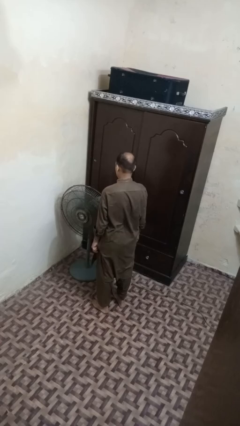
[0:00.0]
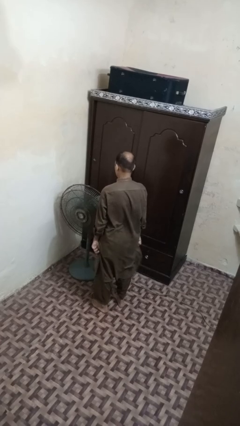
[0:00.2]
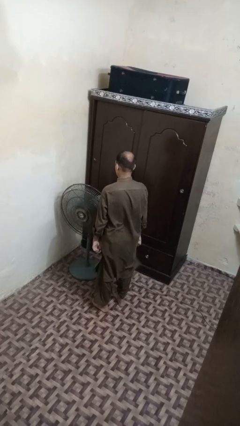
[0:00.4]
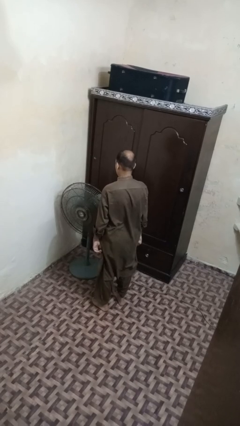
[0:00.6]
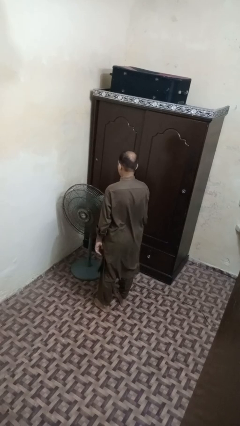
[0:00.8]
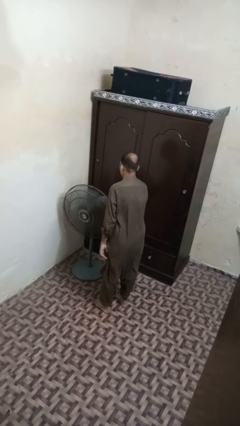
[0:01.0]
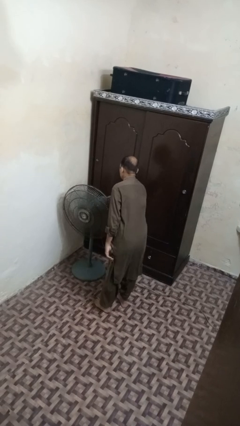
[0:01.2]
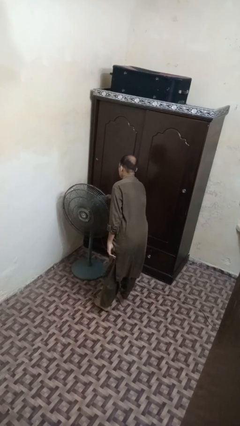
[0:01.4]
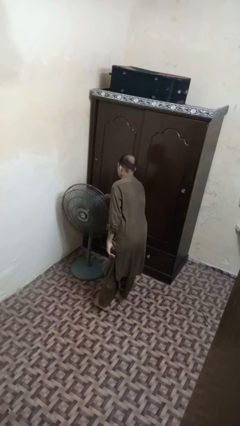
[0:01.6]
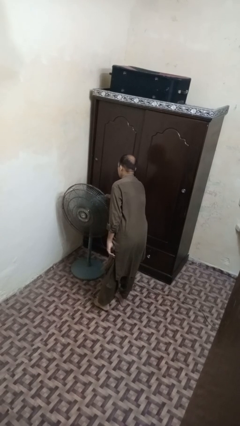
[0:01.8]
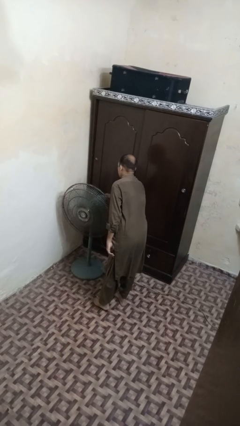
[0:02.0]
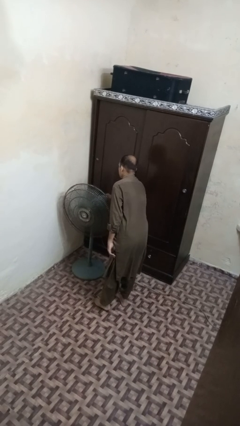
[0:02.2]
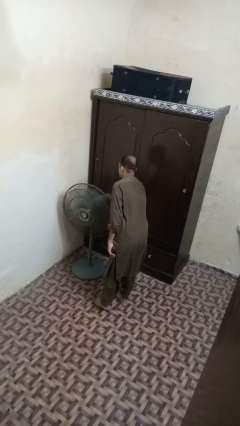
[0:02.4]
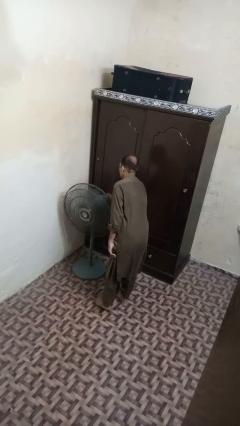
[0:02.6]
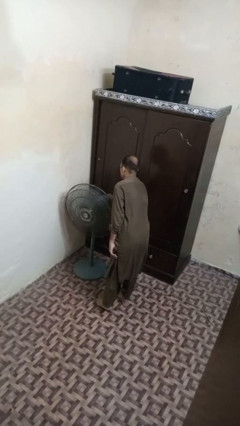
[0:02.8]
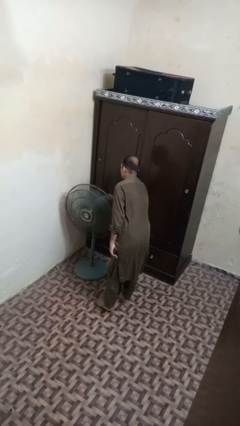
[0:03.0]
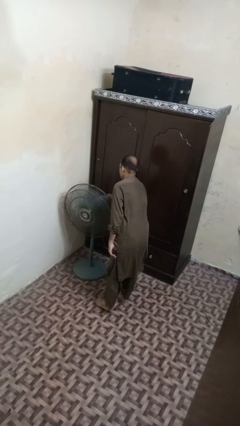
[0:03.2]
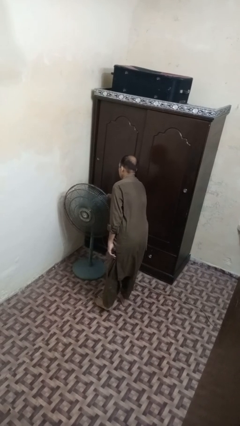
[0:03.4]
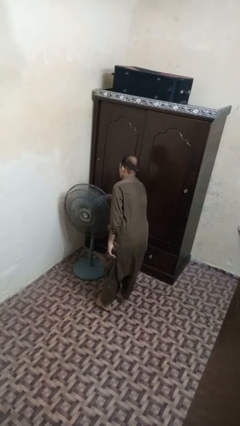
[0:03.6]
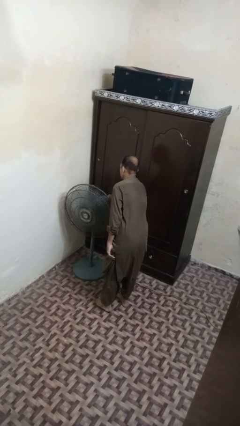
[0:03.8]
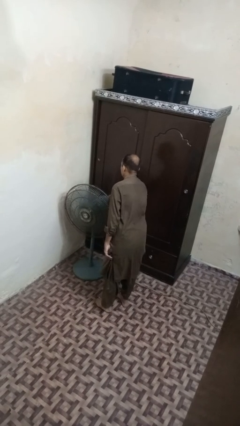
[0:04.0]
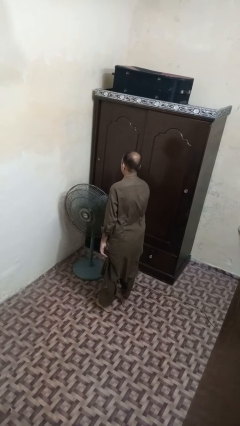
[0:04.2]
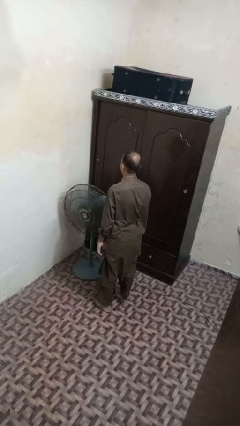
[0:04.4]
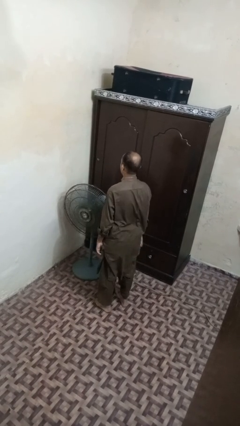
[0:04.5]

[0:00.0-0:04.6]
person turns off fan

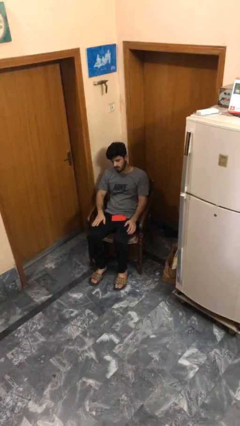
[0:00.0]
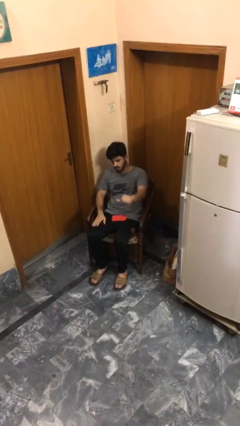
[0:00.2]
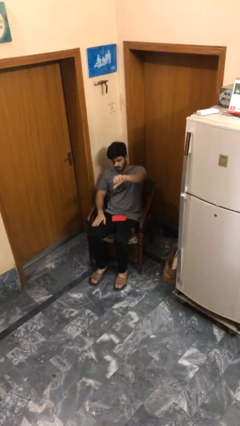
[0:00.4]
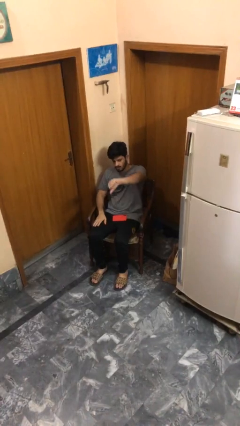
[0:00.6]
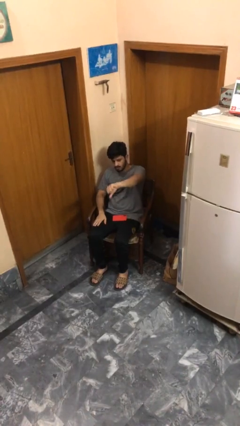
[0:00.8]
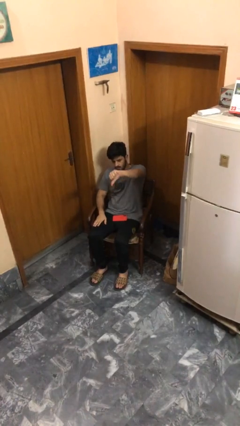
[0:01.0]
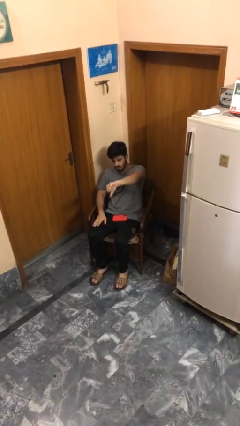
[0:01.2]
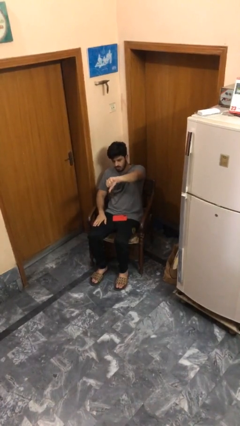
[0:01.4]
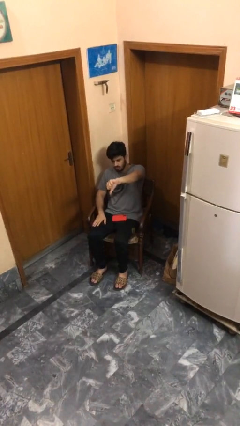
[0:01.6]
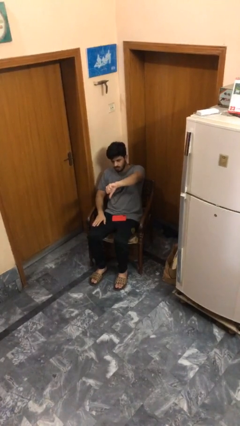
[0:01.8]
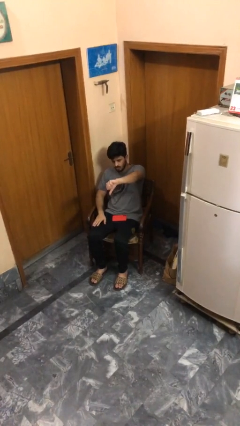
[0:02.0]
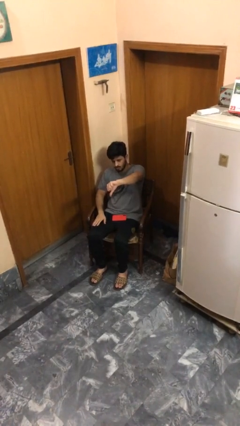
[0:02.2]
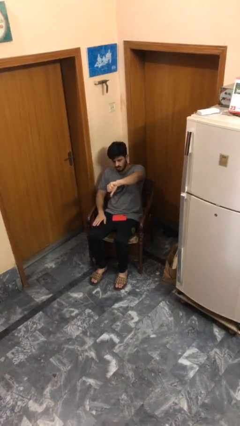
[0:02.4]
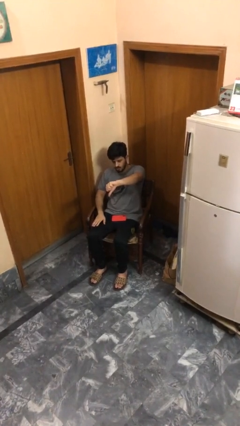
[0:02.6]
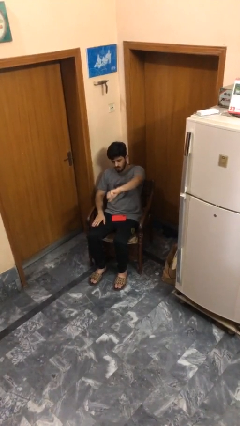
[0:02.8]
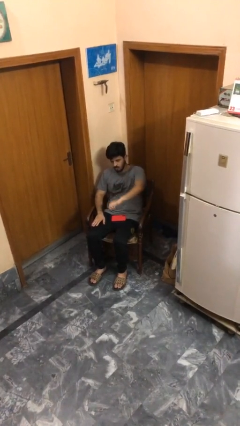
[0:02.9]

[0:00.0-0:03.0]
person gestures thumbs down

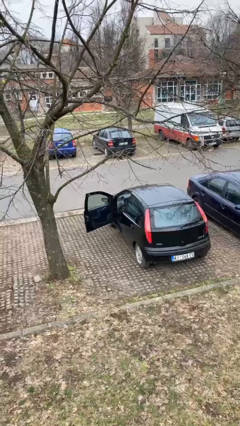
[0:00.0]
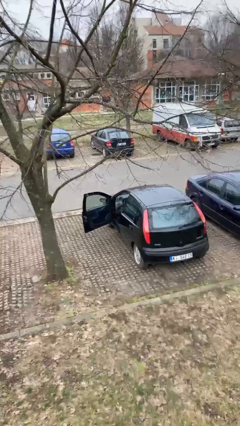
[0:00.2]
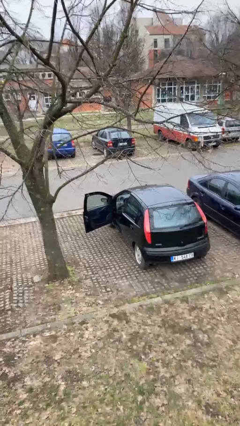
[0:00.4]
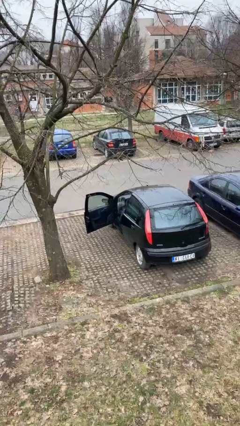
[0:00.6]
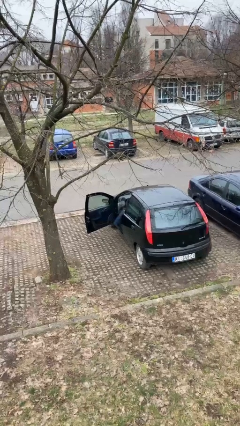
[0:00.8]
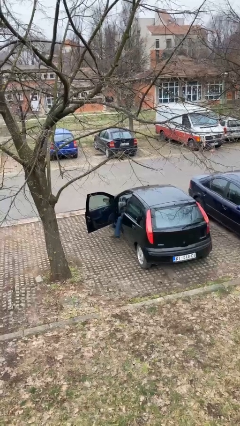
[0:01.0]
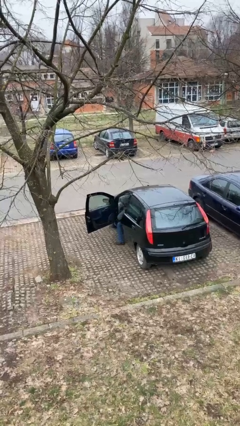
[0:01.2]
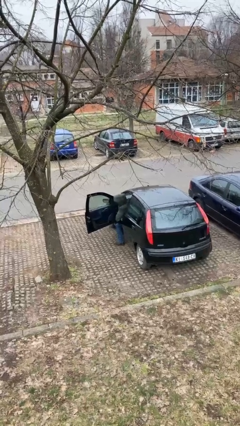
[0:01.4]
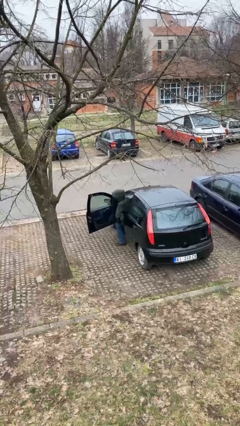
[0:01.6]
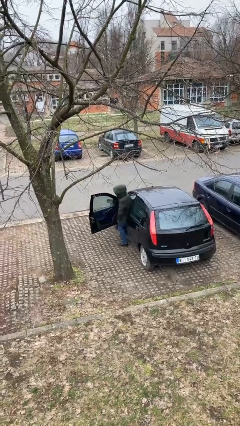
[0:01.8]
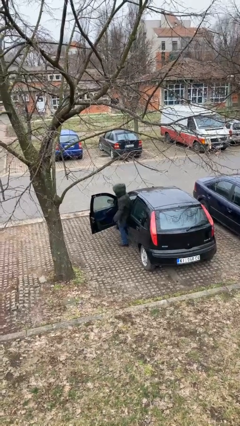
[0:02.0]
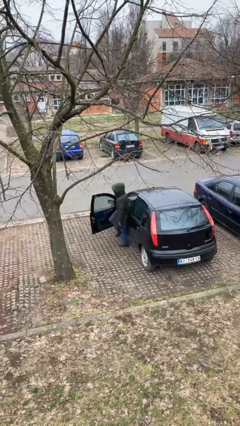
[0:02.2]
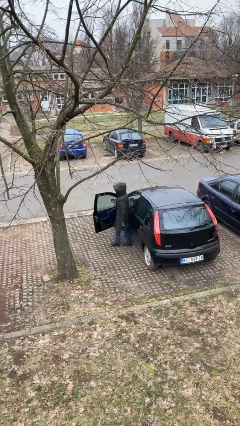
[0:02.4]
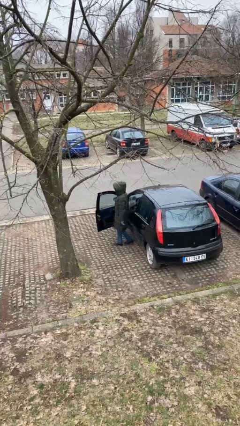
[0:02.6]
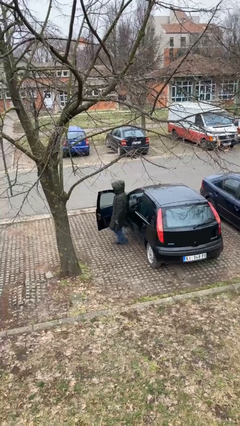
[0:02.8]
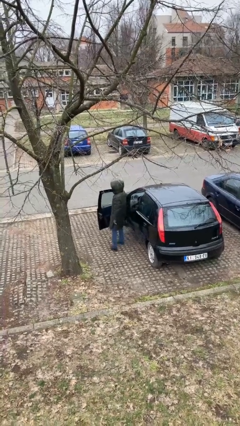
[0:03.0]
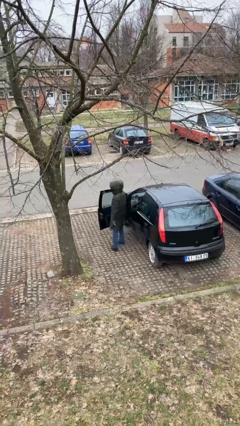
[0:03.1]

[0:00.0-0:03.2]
person exits car

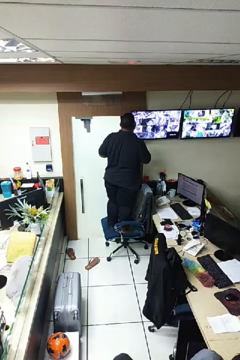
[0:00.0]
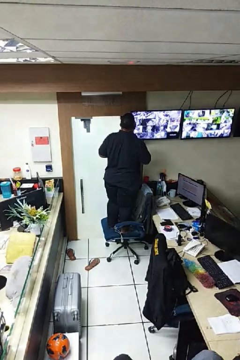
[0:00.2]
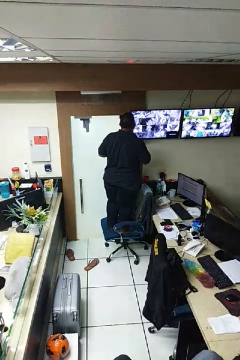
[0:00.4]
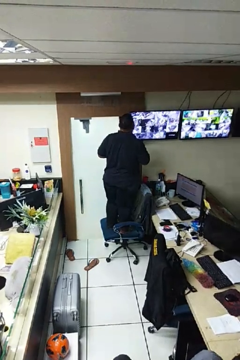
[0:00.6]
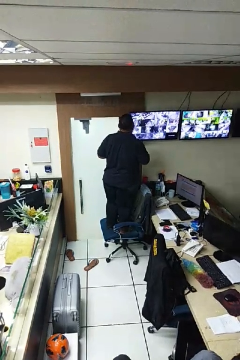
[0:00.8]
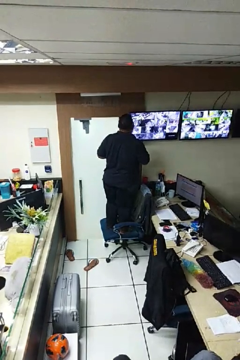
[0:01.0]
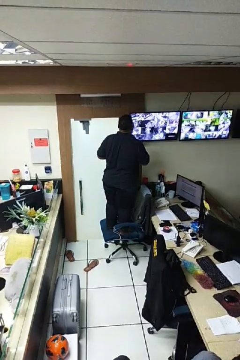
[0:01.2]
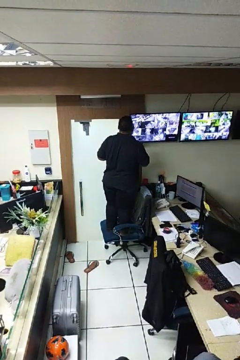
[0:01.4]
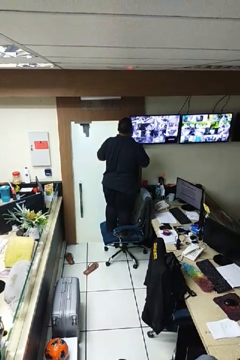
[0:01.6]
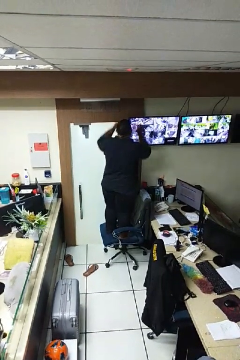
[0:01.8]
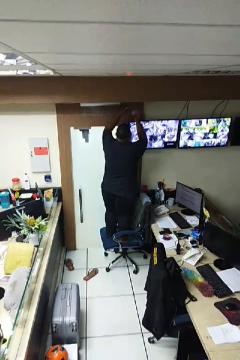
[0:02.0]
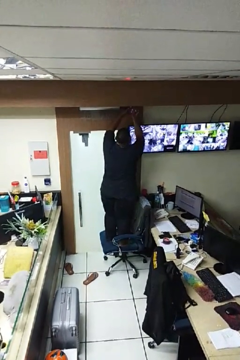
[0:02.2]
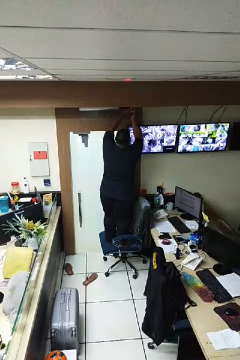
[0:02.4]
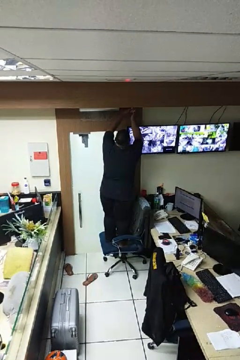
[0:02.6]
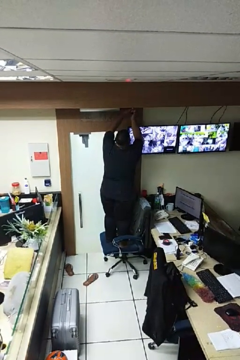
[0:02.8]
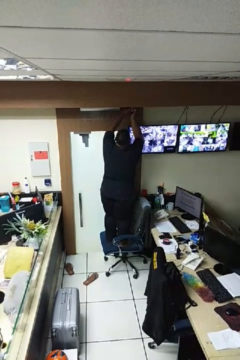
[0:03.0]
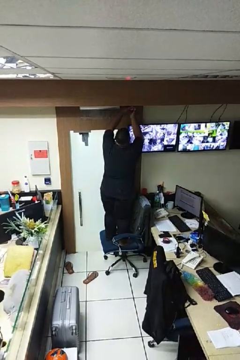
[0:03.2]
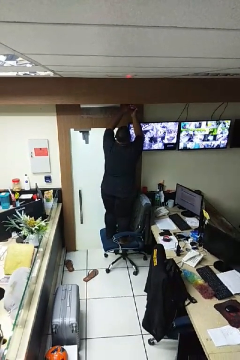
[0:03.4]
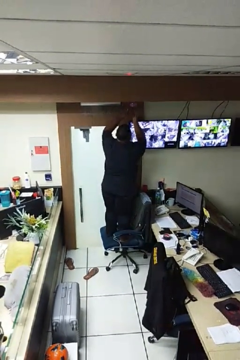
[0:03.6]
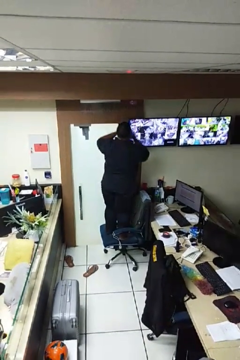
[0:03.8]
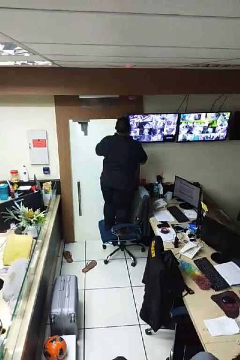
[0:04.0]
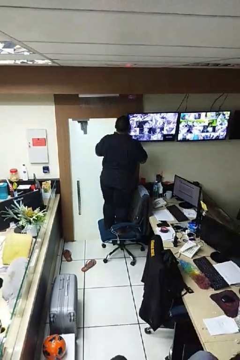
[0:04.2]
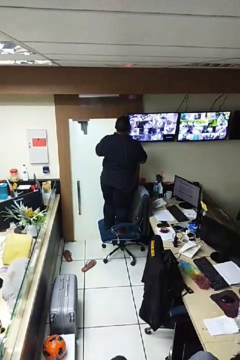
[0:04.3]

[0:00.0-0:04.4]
person puts up smoke detector

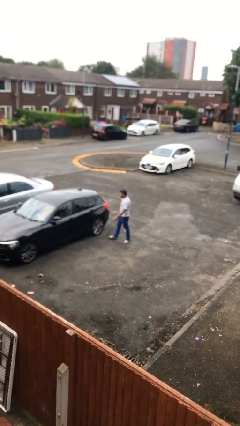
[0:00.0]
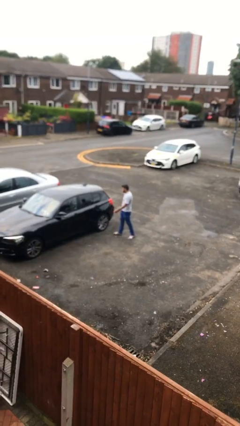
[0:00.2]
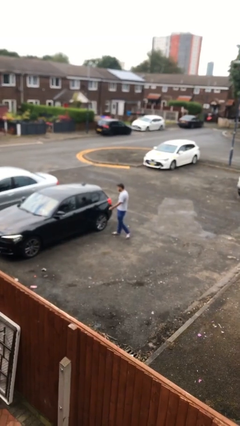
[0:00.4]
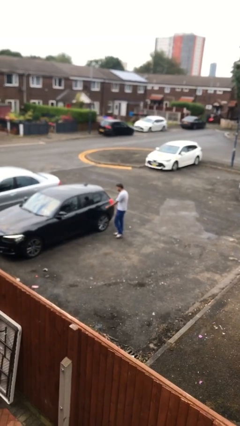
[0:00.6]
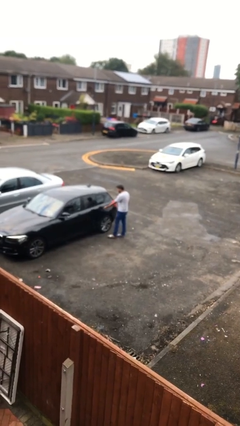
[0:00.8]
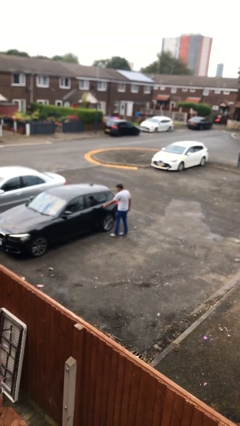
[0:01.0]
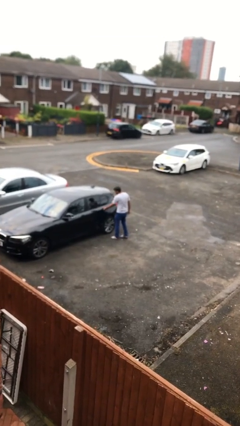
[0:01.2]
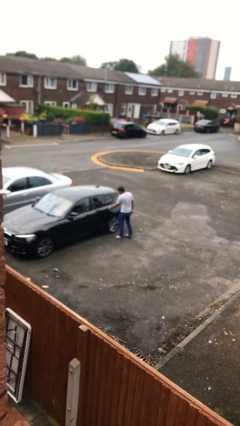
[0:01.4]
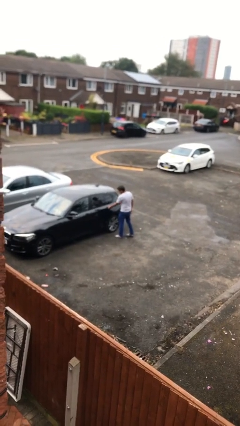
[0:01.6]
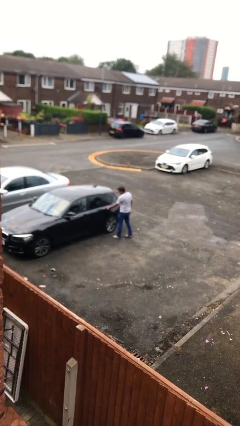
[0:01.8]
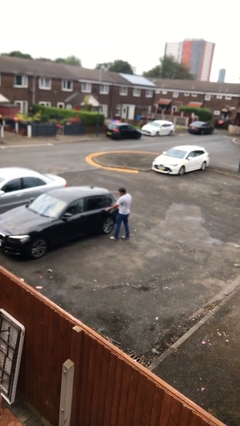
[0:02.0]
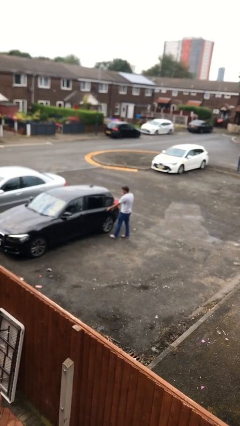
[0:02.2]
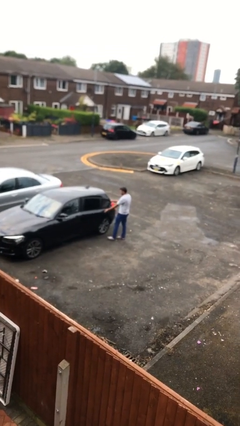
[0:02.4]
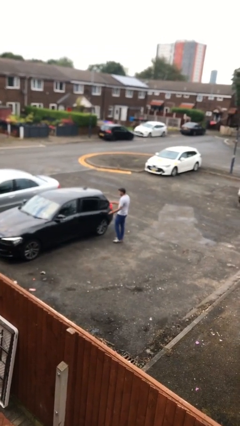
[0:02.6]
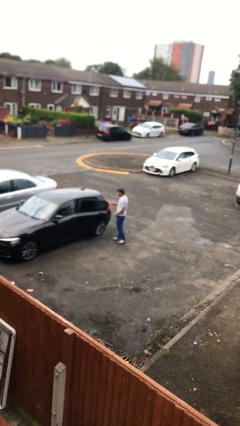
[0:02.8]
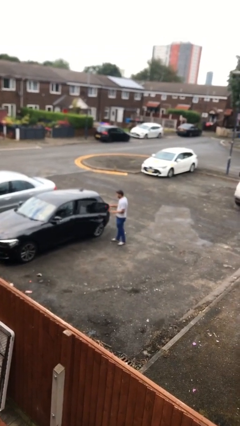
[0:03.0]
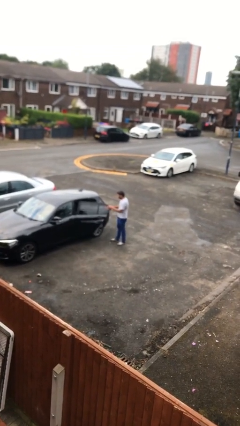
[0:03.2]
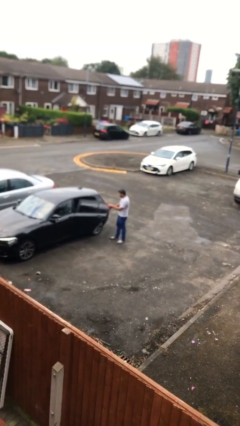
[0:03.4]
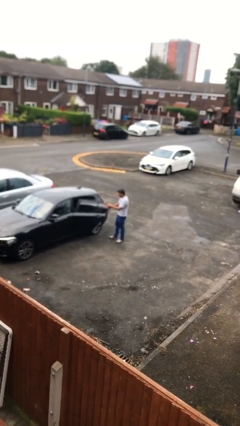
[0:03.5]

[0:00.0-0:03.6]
person opens car door
